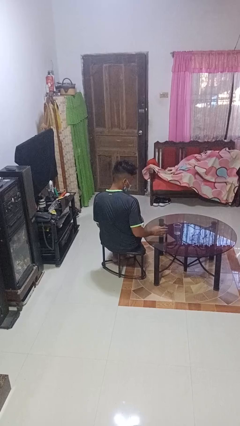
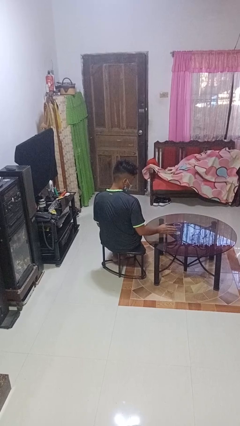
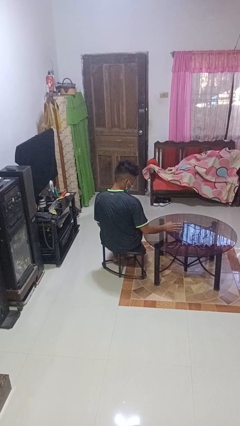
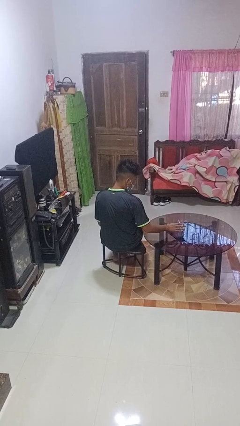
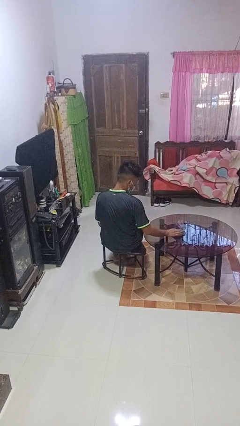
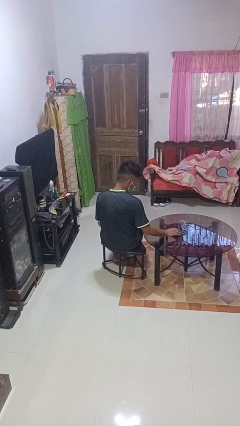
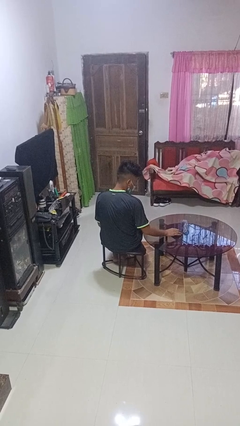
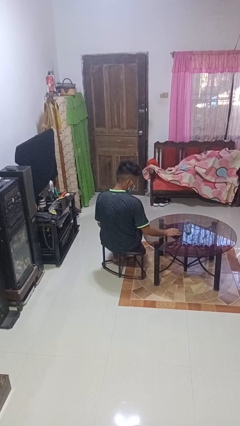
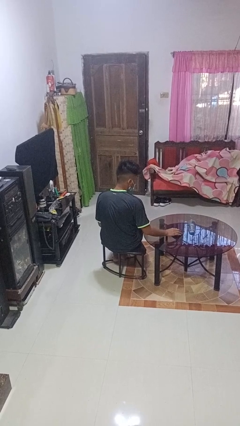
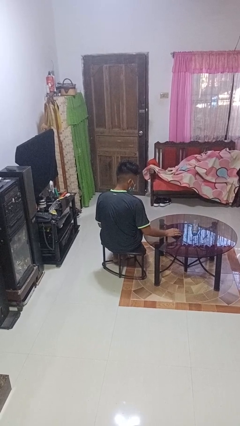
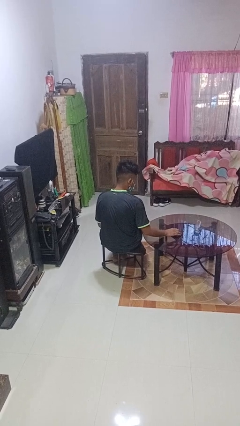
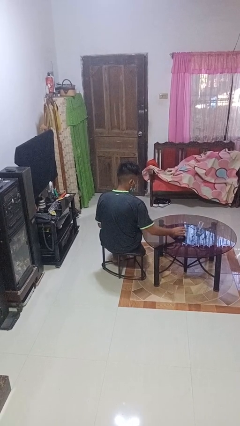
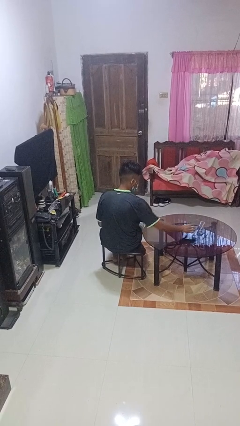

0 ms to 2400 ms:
person knocks over glass

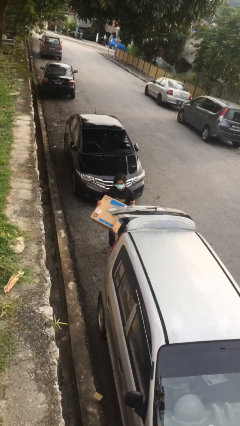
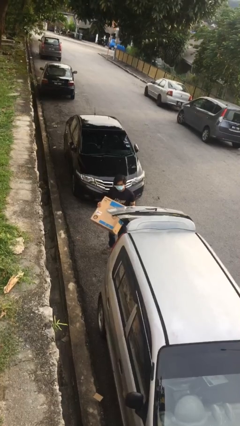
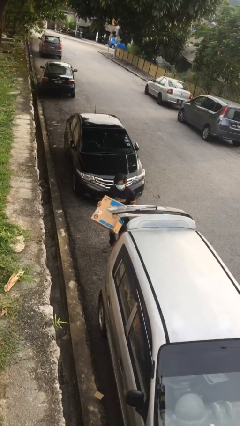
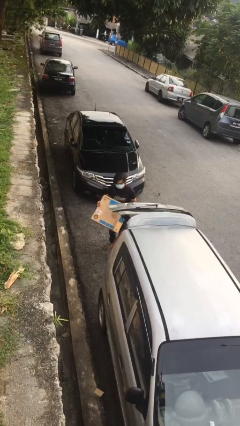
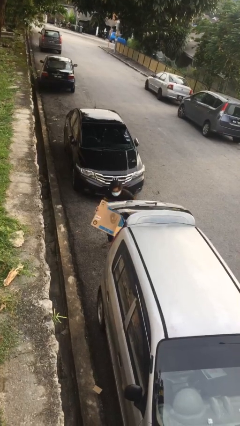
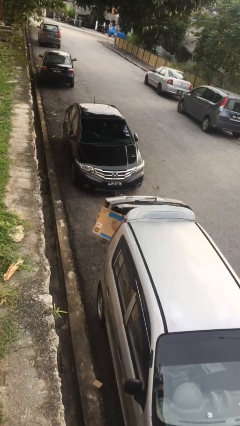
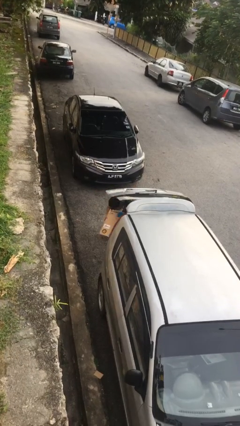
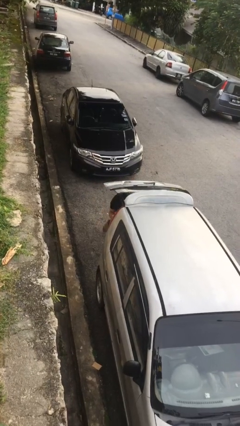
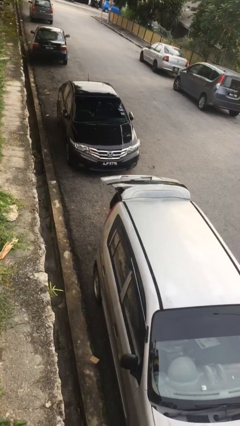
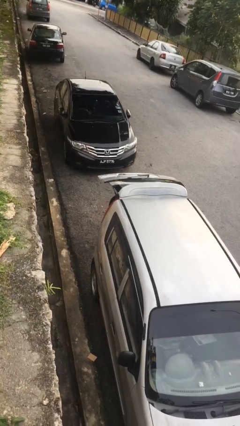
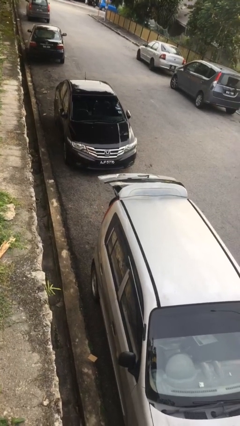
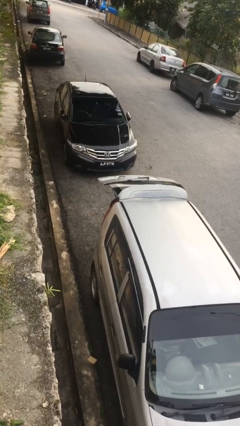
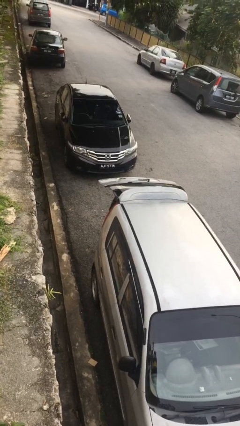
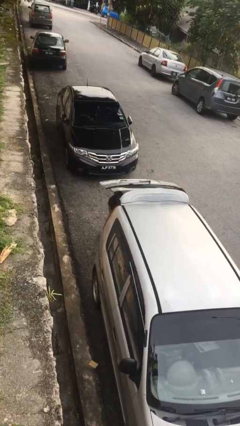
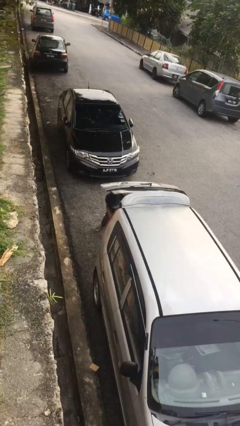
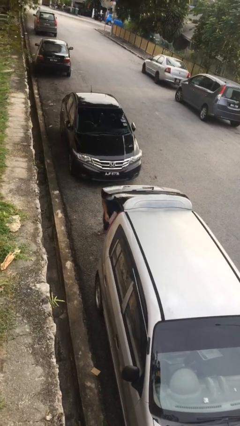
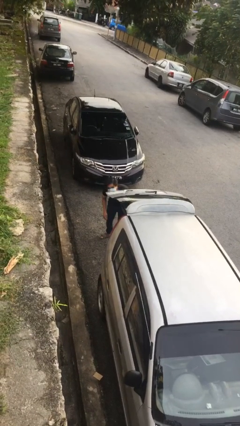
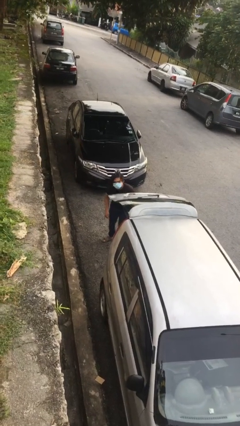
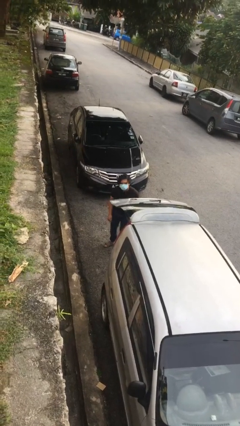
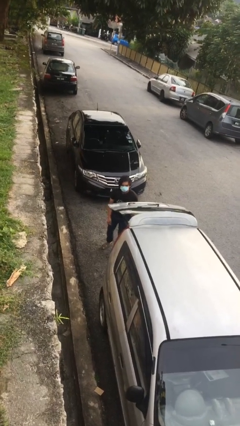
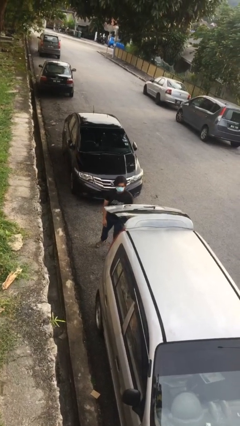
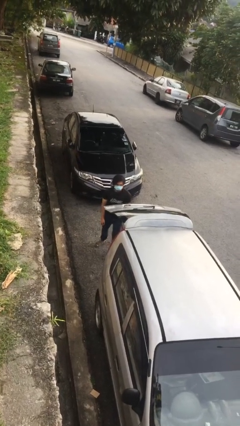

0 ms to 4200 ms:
person loads car

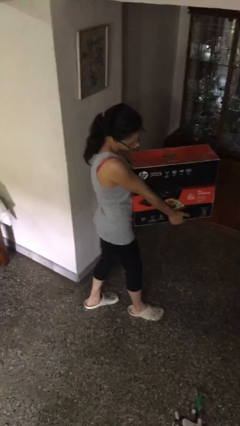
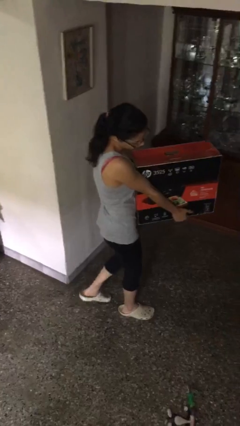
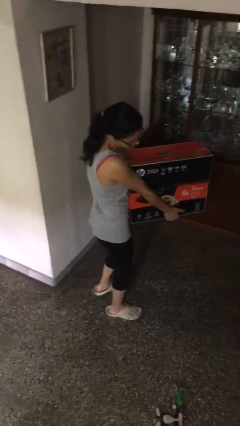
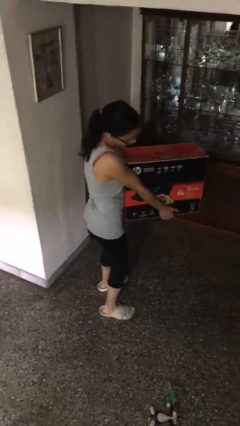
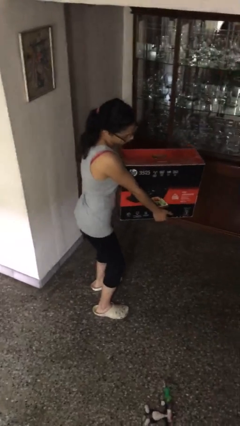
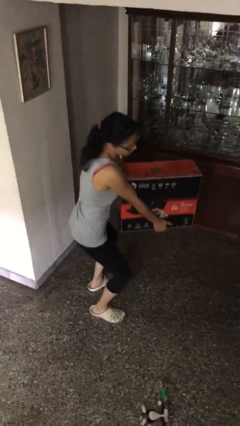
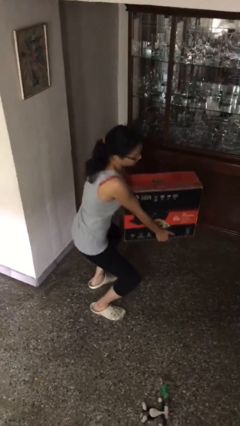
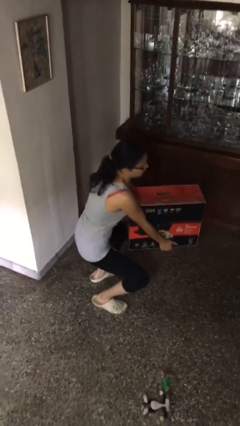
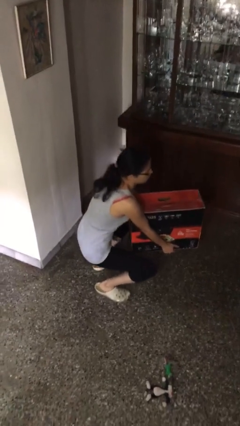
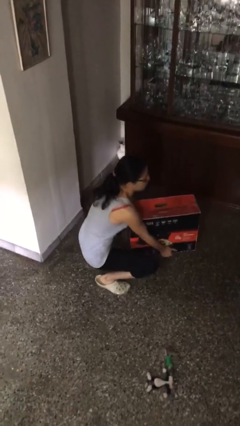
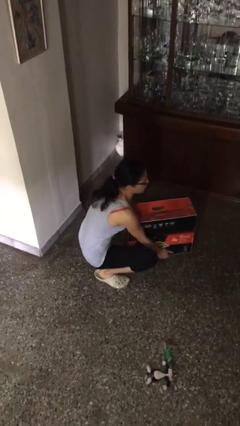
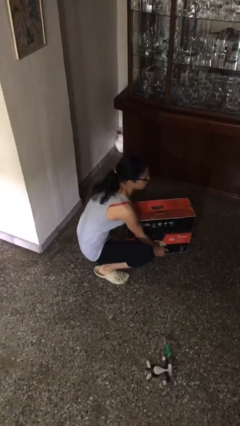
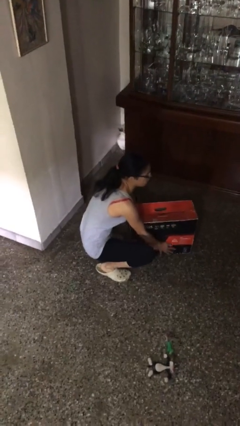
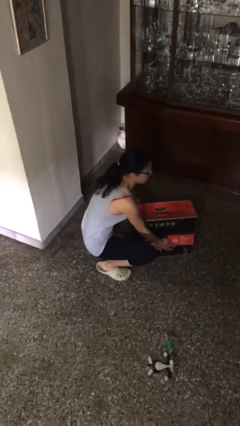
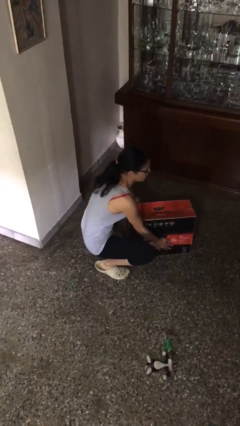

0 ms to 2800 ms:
person puts down object on floor

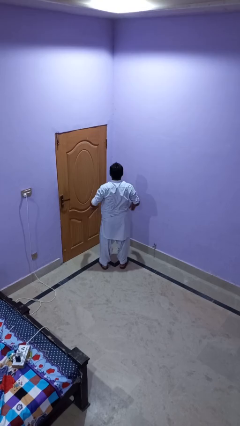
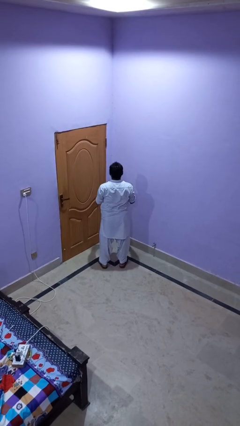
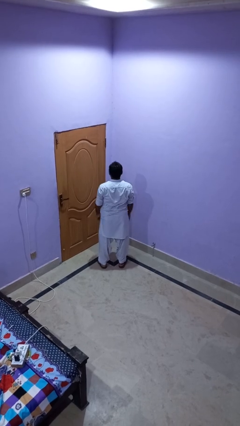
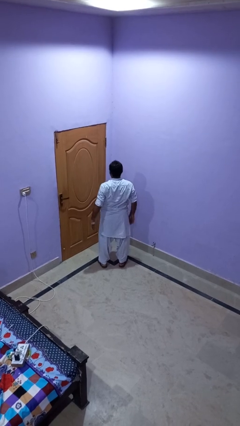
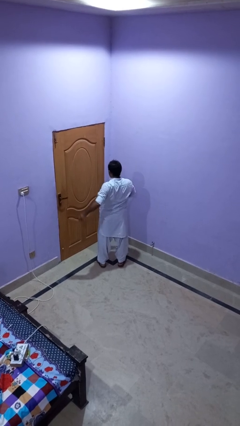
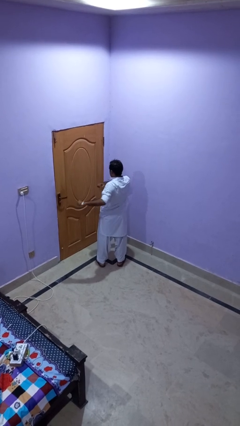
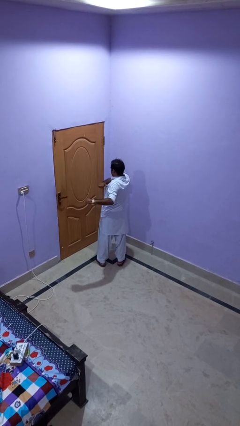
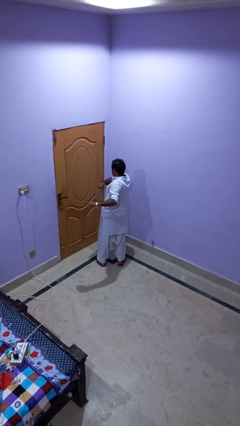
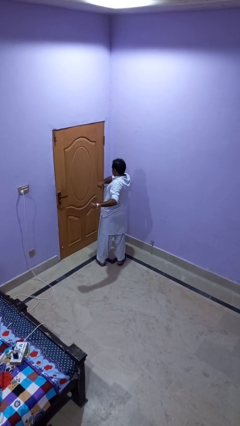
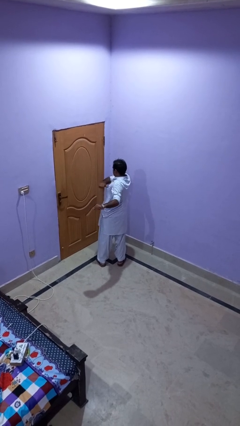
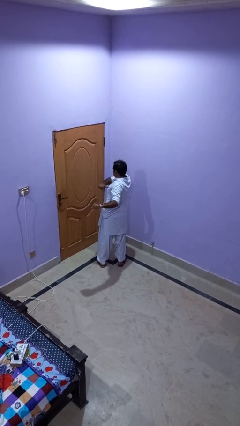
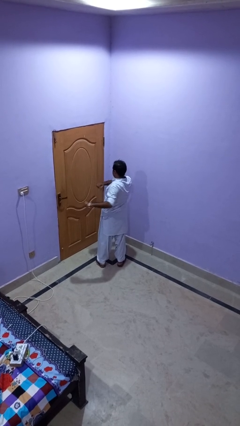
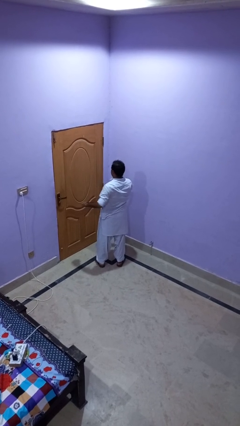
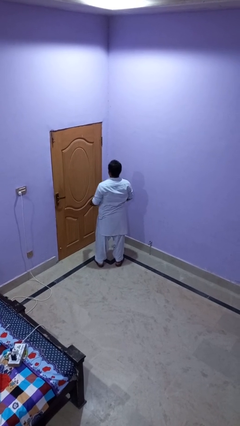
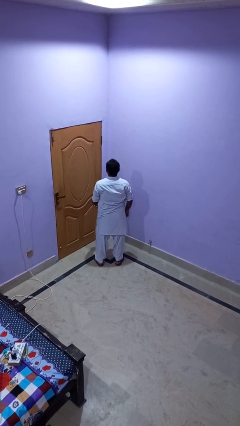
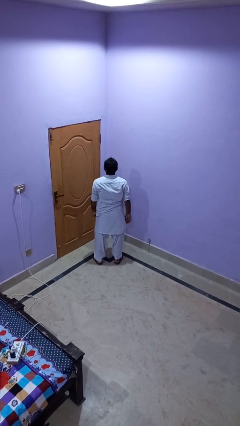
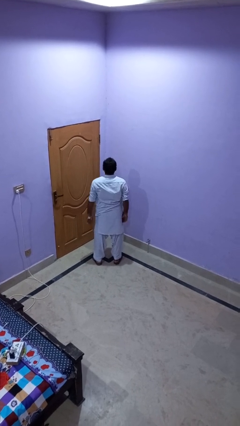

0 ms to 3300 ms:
person stretches arms to side

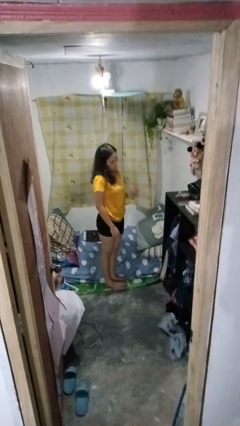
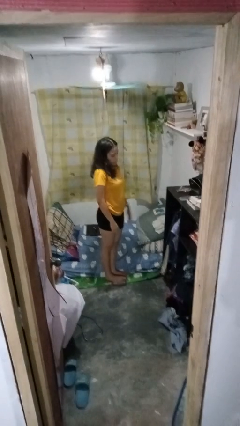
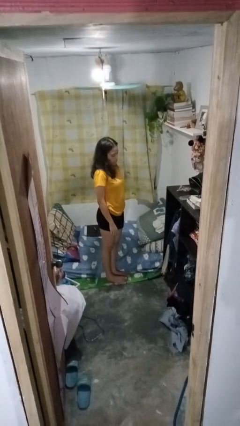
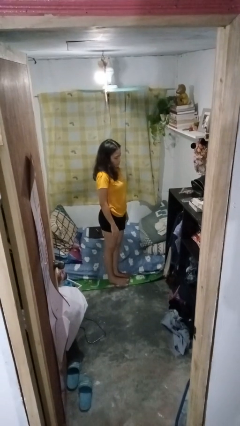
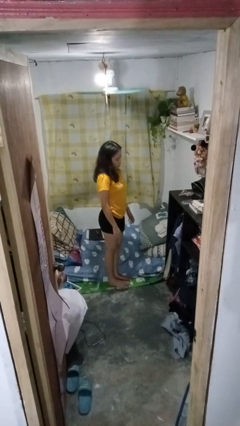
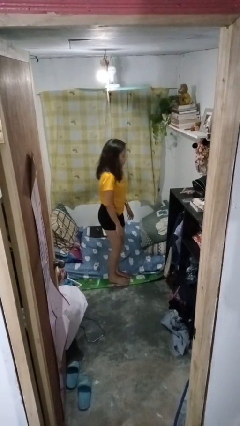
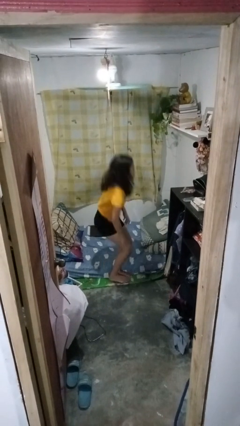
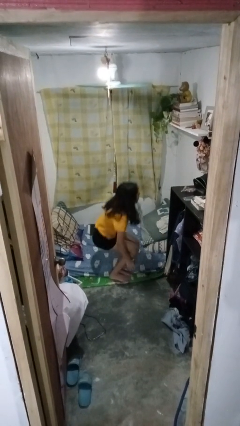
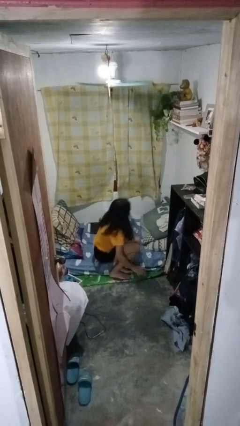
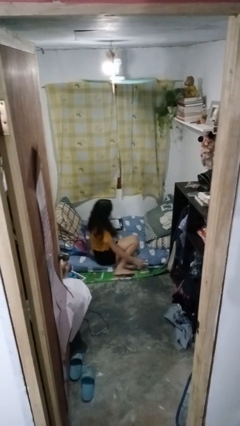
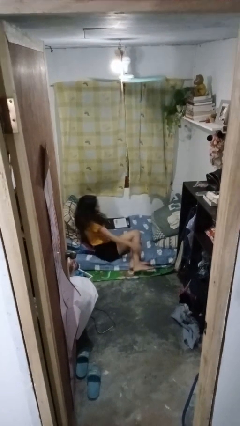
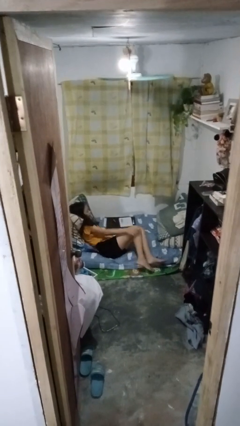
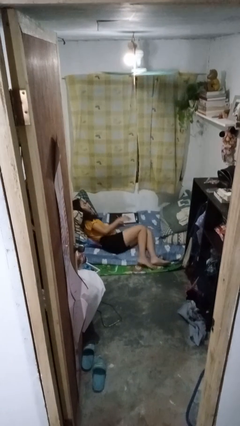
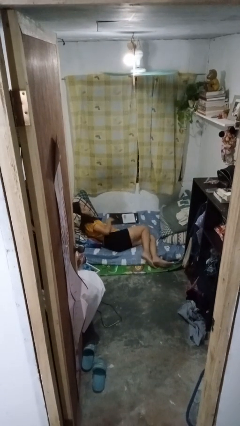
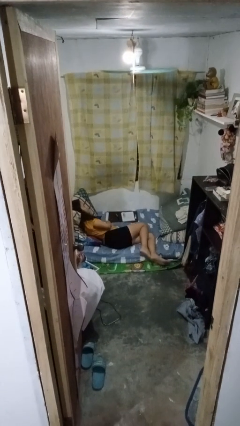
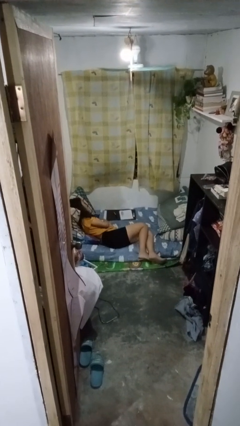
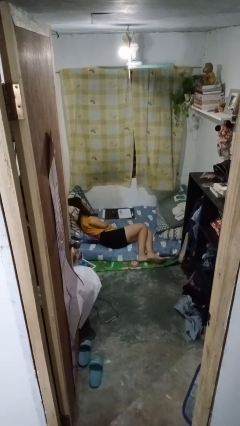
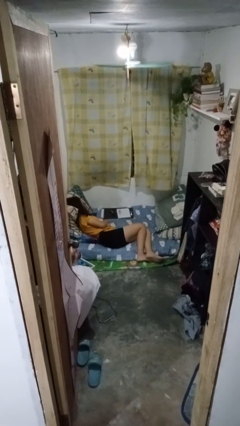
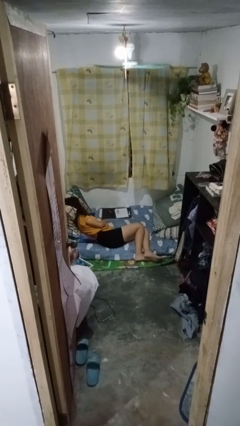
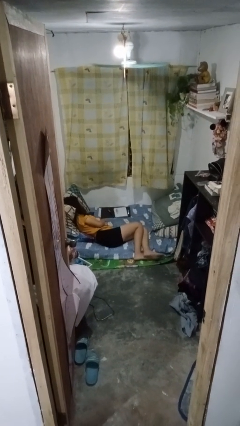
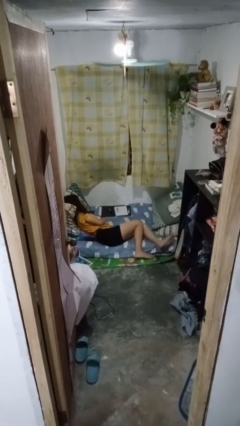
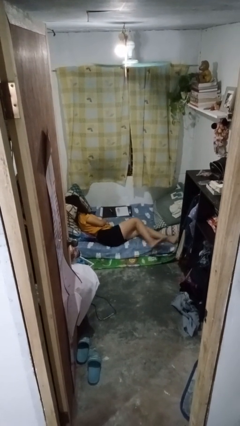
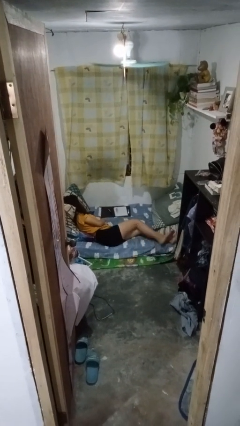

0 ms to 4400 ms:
person lies down on bed
